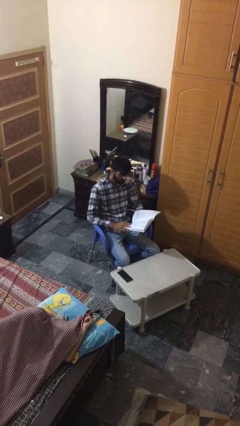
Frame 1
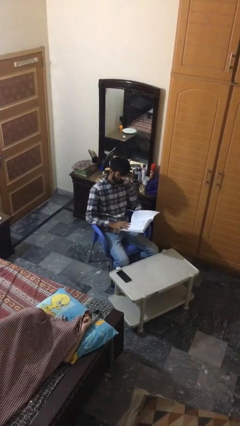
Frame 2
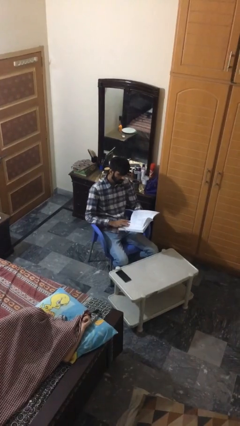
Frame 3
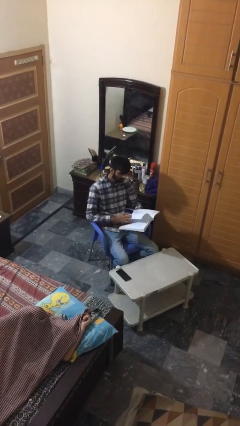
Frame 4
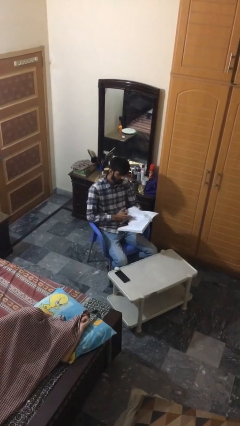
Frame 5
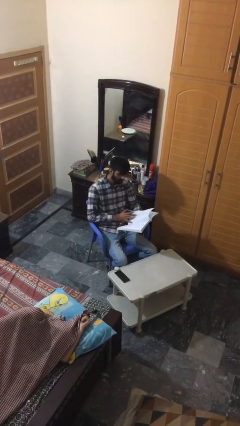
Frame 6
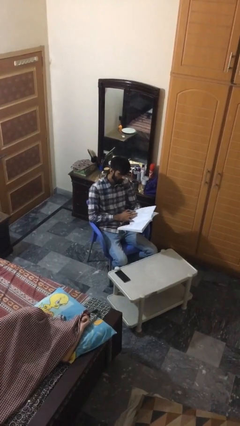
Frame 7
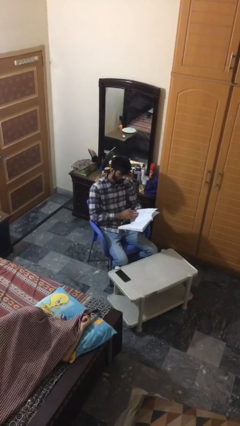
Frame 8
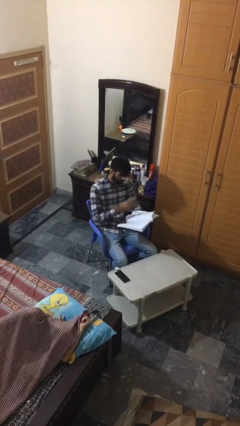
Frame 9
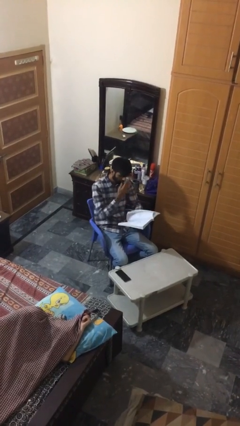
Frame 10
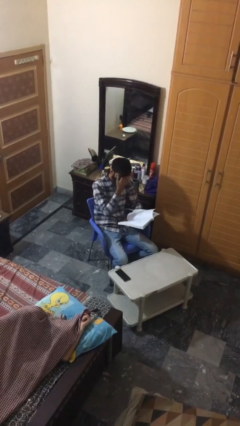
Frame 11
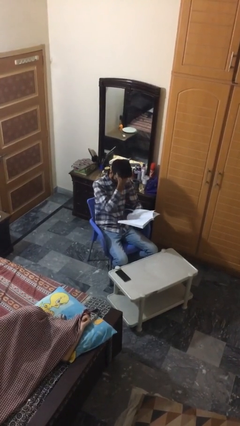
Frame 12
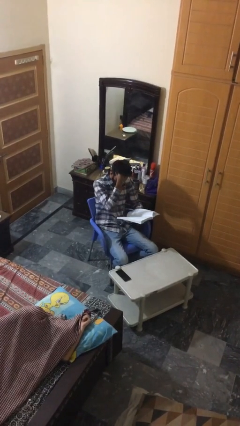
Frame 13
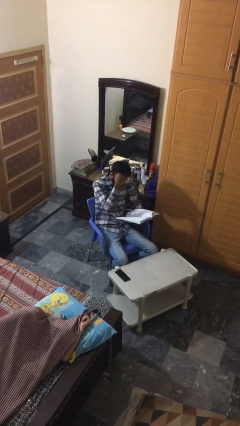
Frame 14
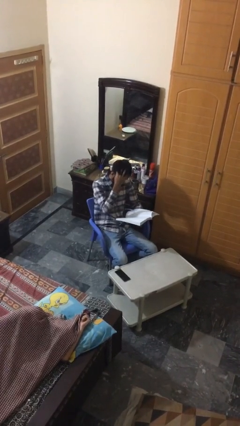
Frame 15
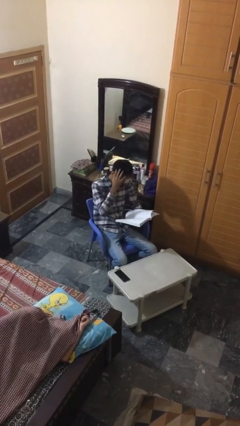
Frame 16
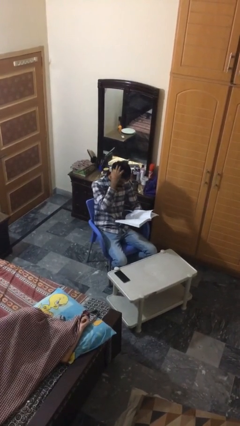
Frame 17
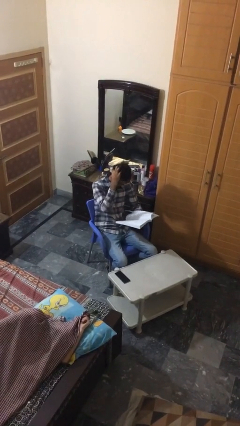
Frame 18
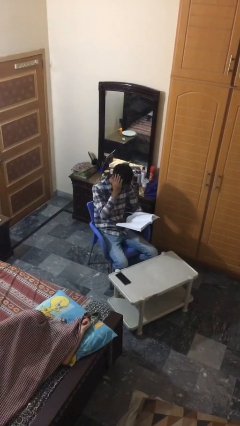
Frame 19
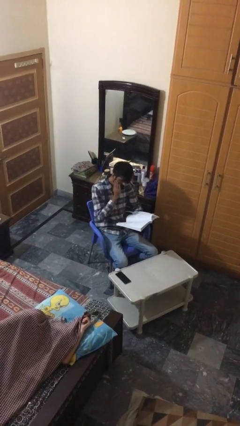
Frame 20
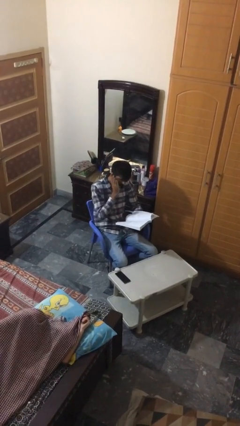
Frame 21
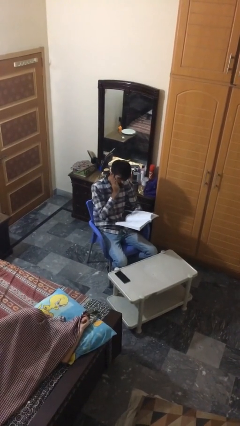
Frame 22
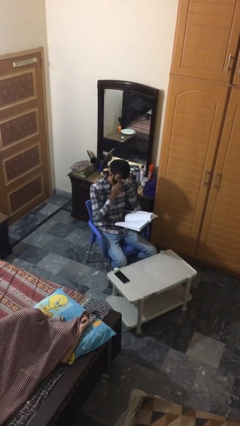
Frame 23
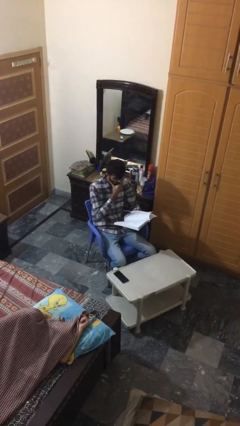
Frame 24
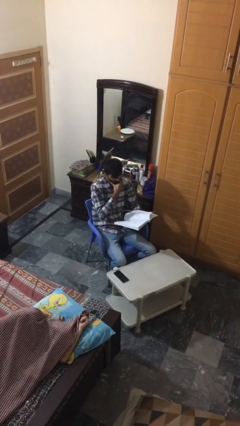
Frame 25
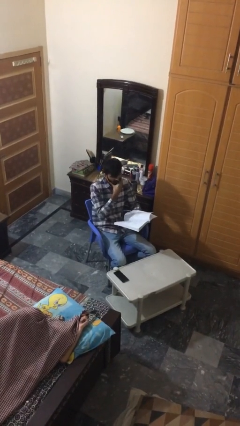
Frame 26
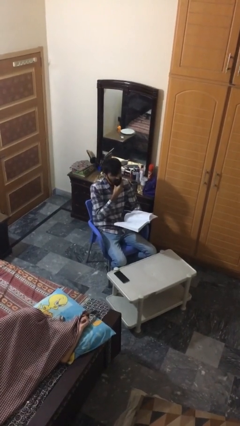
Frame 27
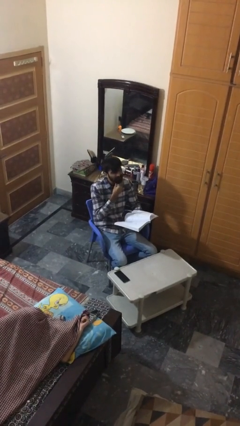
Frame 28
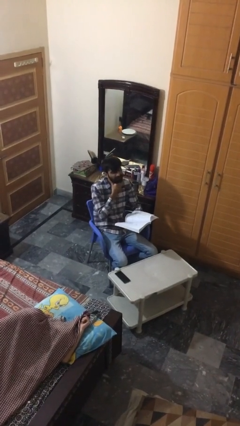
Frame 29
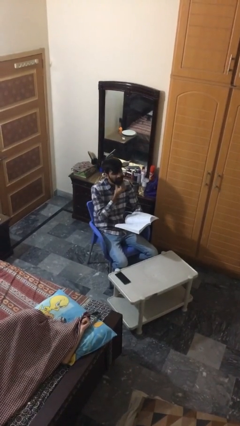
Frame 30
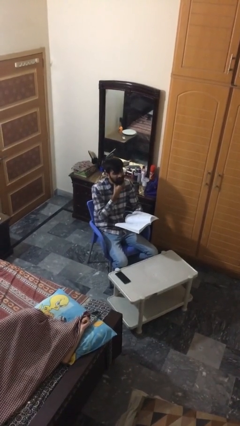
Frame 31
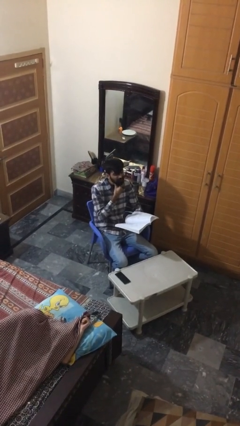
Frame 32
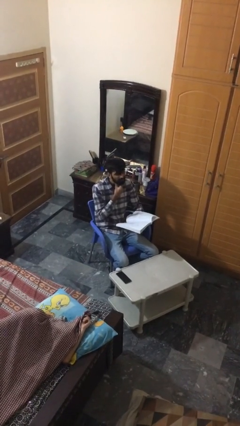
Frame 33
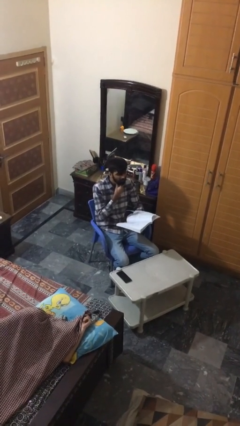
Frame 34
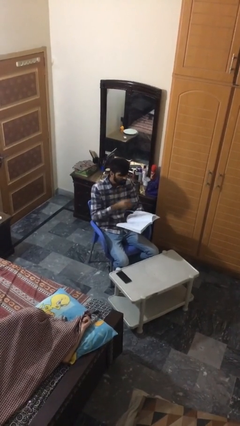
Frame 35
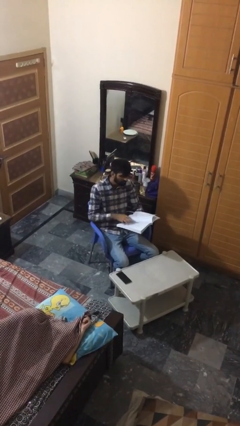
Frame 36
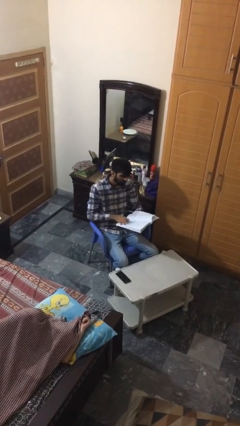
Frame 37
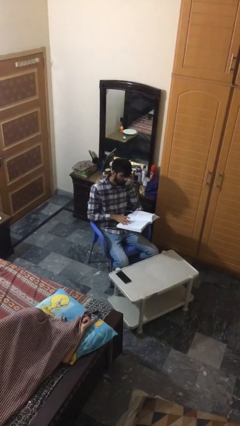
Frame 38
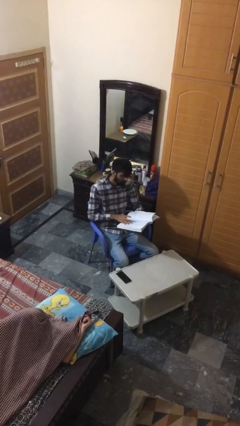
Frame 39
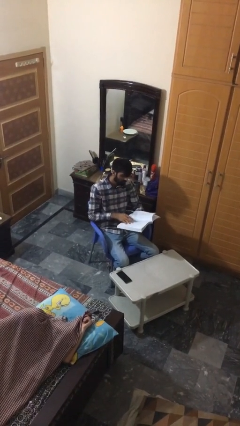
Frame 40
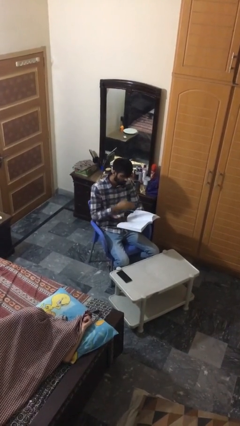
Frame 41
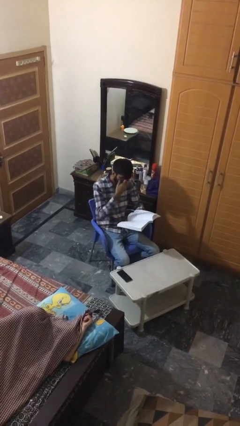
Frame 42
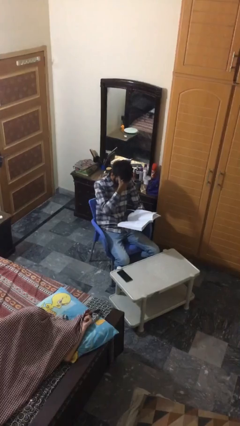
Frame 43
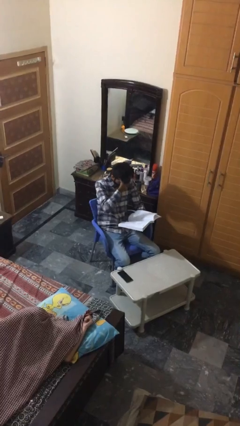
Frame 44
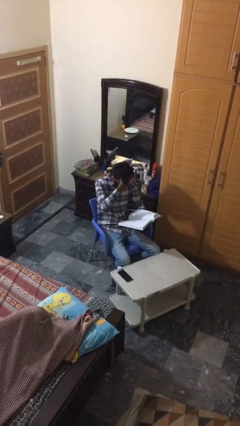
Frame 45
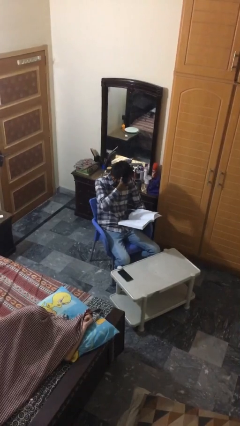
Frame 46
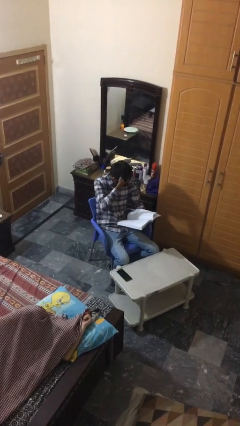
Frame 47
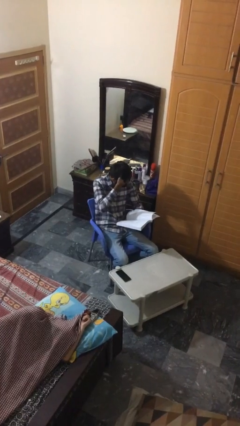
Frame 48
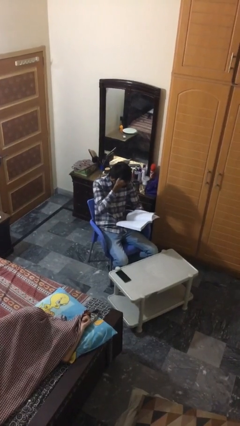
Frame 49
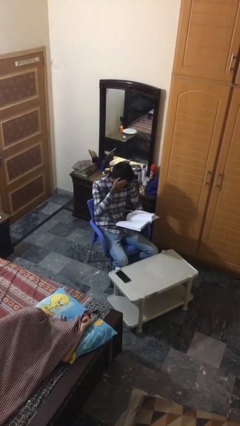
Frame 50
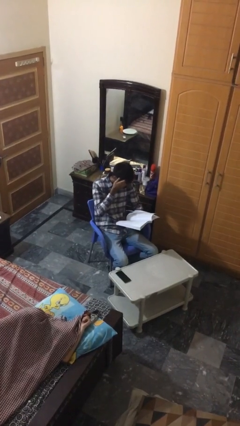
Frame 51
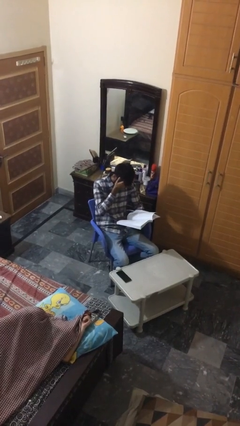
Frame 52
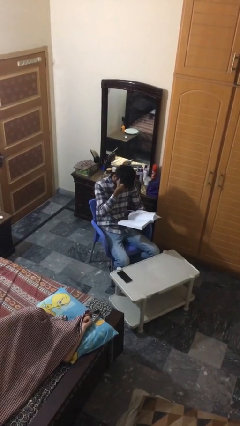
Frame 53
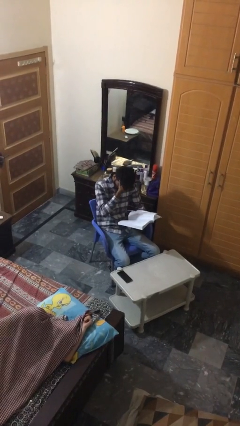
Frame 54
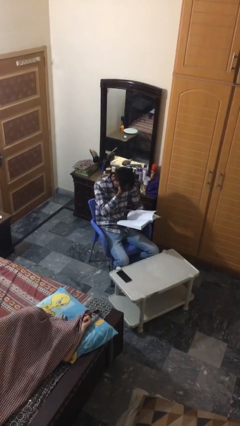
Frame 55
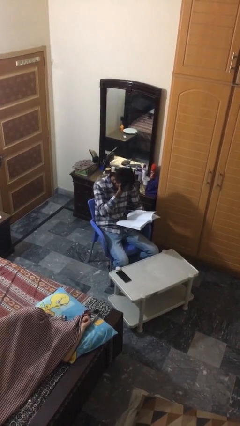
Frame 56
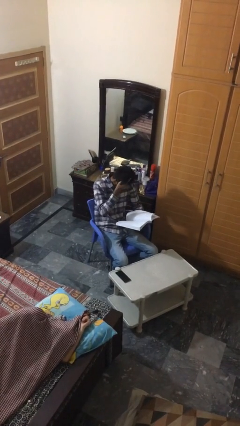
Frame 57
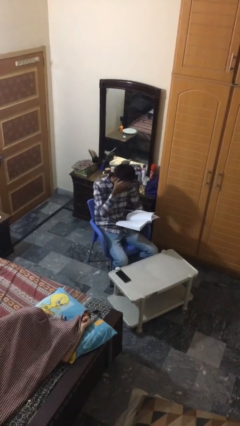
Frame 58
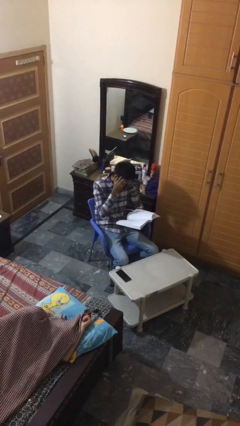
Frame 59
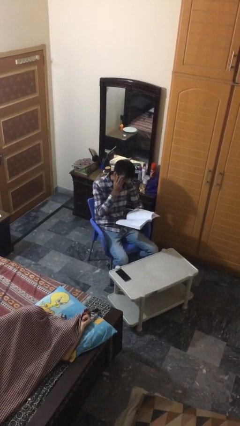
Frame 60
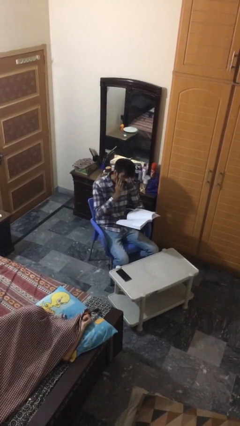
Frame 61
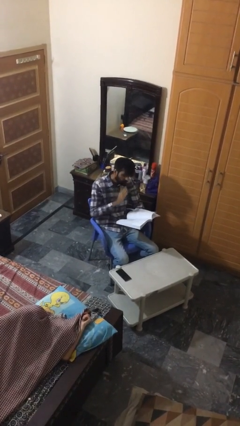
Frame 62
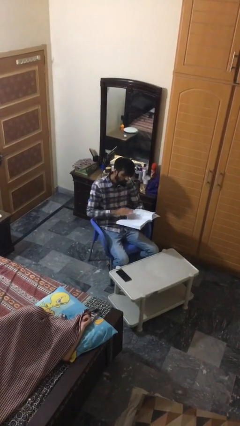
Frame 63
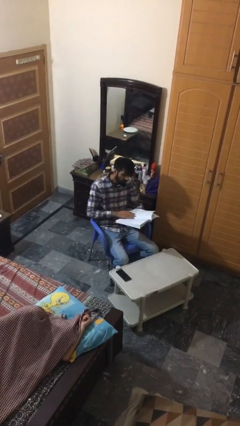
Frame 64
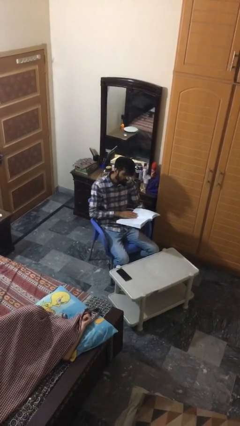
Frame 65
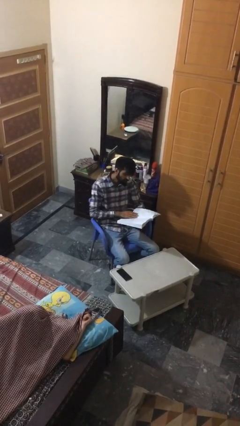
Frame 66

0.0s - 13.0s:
person reads document

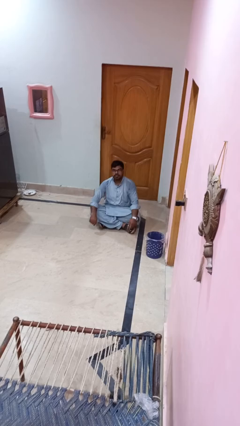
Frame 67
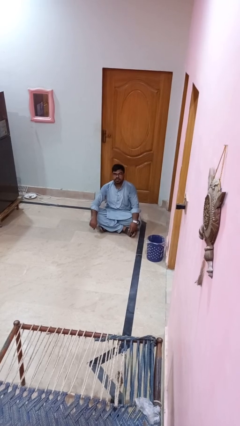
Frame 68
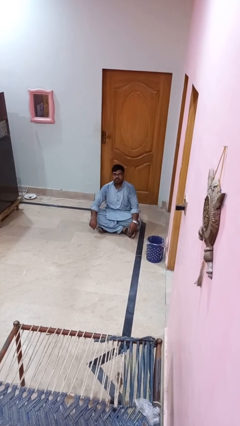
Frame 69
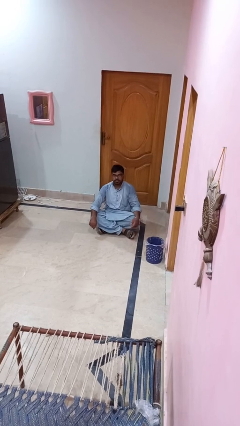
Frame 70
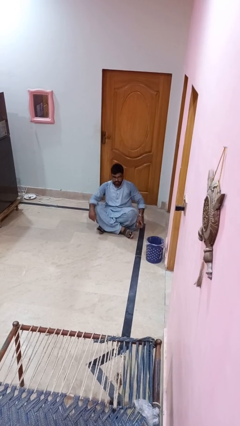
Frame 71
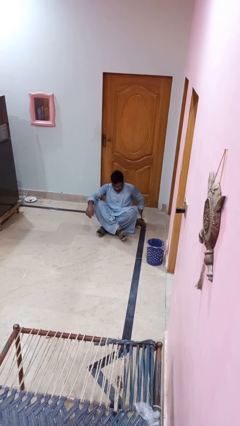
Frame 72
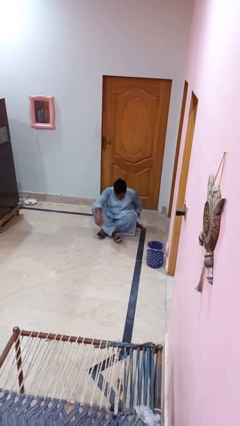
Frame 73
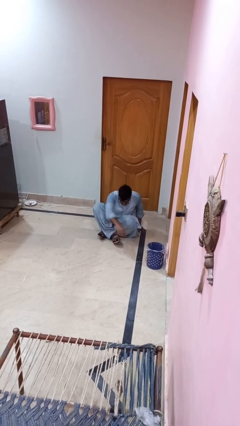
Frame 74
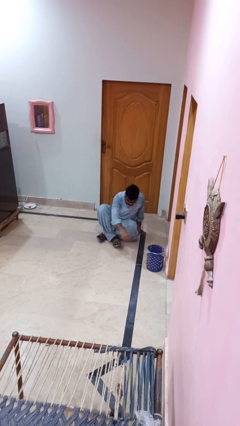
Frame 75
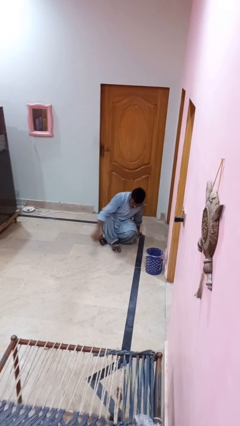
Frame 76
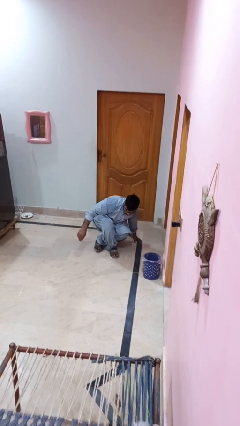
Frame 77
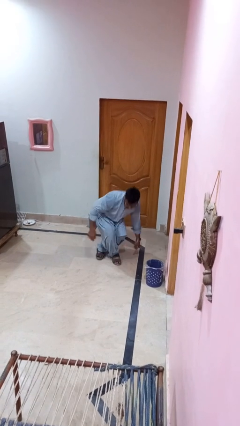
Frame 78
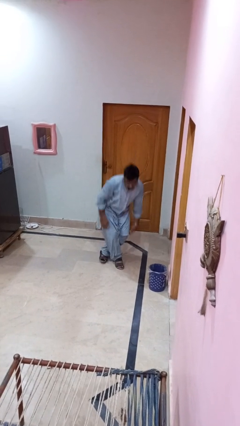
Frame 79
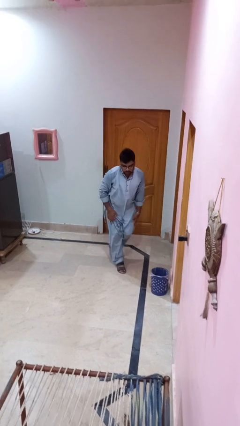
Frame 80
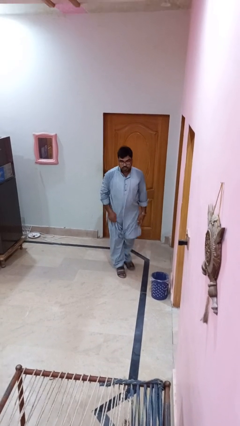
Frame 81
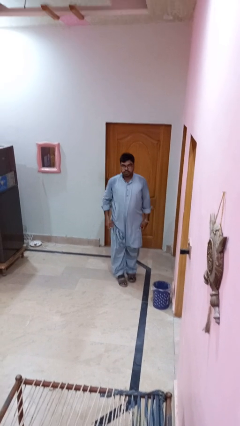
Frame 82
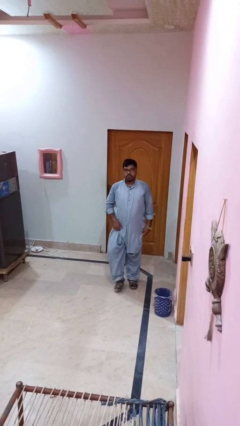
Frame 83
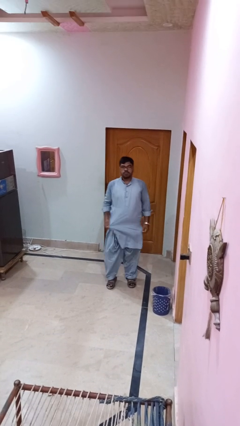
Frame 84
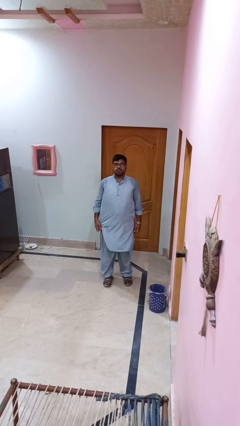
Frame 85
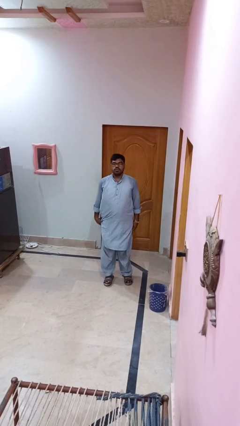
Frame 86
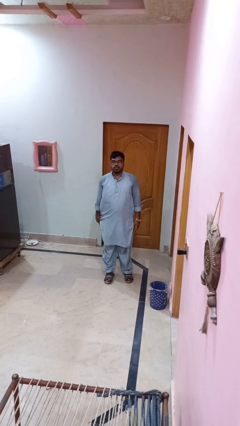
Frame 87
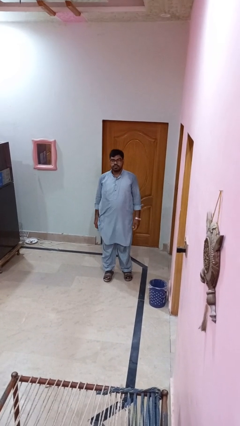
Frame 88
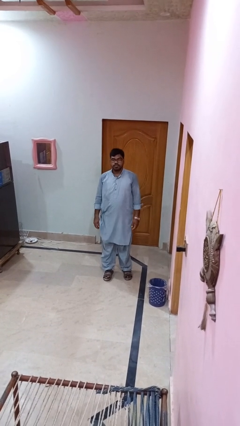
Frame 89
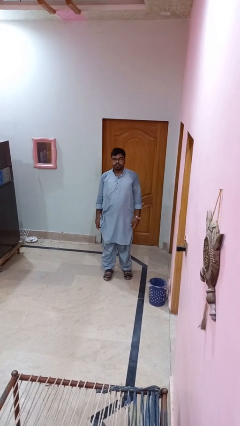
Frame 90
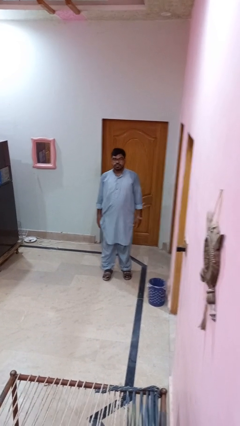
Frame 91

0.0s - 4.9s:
person stands up from floor

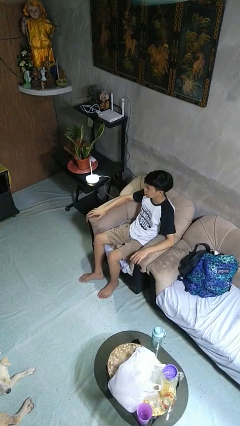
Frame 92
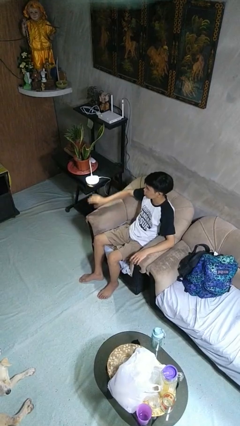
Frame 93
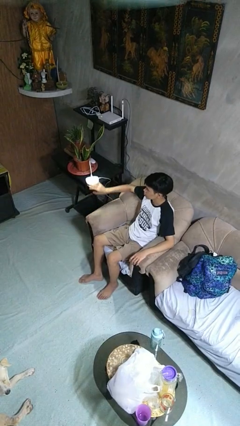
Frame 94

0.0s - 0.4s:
person turns off lamp

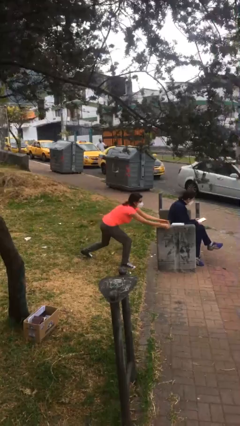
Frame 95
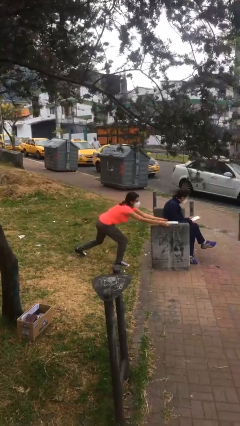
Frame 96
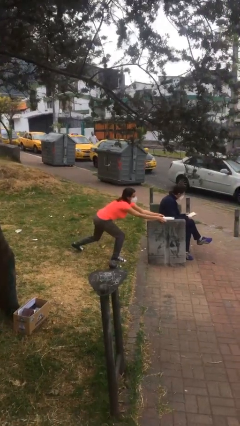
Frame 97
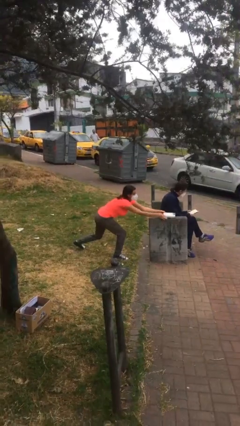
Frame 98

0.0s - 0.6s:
person steals object from person
